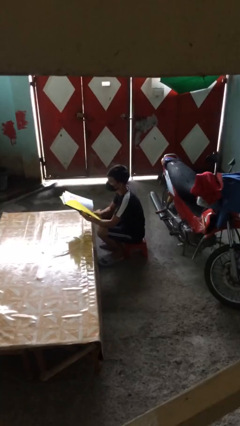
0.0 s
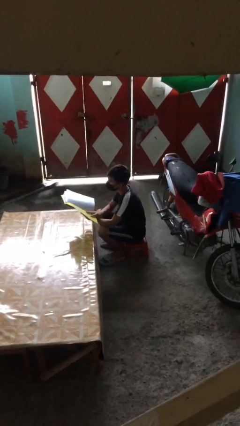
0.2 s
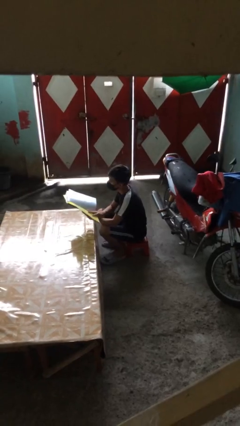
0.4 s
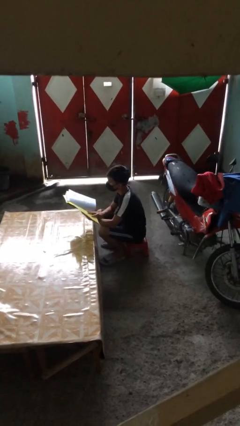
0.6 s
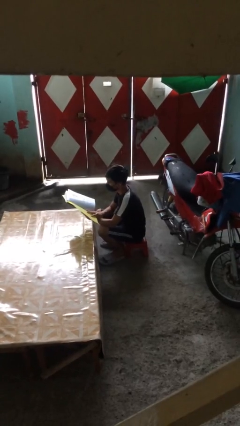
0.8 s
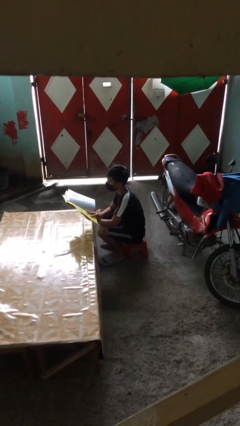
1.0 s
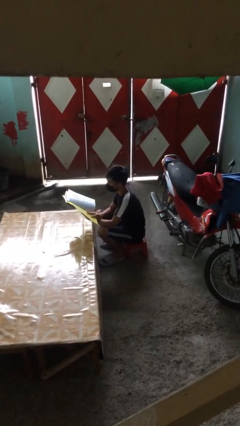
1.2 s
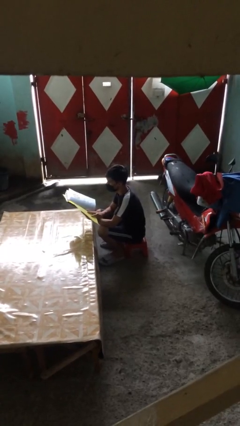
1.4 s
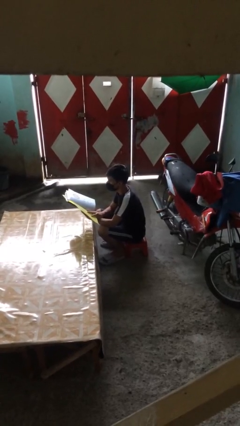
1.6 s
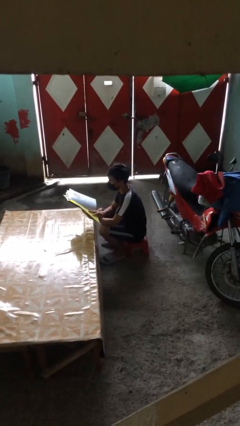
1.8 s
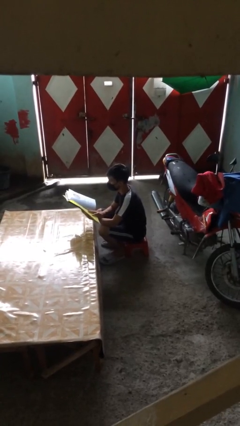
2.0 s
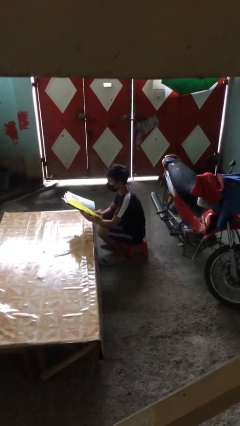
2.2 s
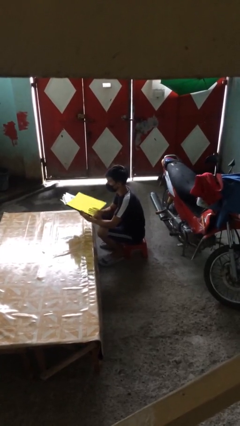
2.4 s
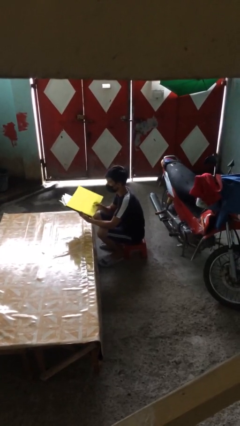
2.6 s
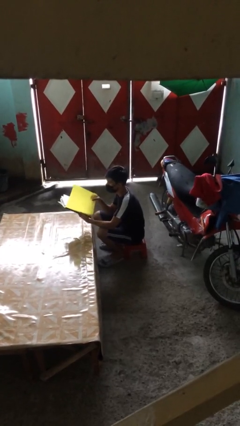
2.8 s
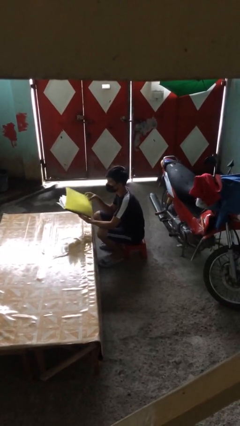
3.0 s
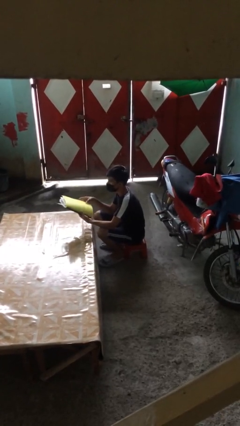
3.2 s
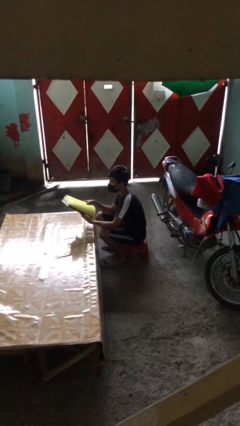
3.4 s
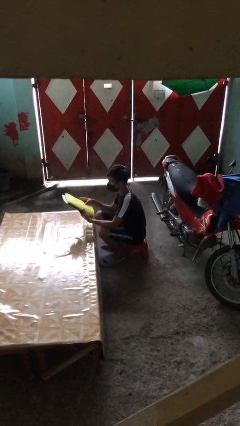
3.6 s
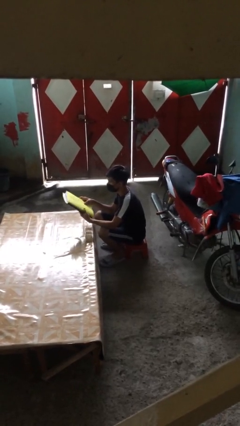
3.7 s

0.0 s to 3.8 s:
person reads document

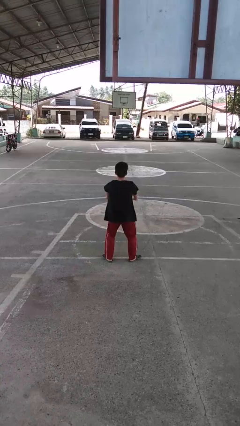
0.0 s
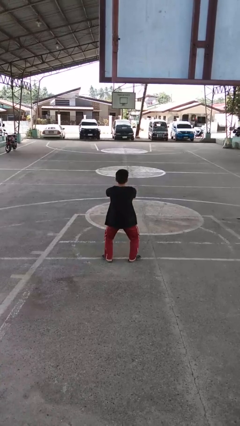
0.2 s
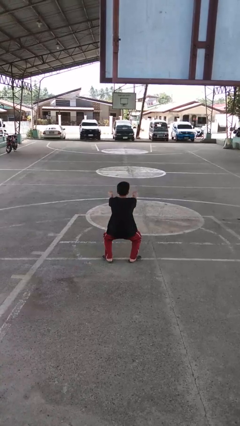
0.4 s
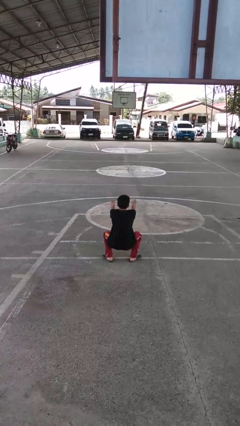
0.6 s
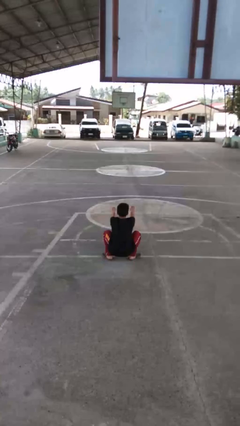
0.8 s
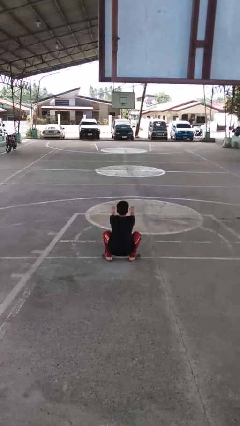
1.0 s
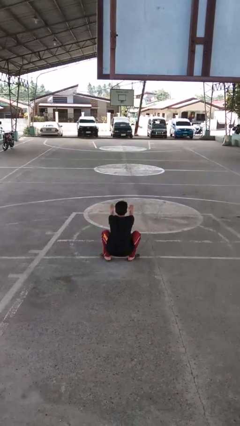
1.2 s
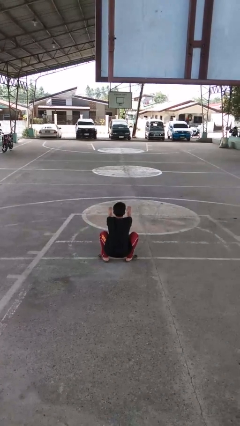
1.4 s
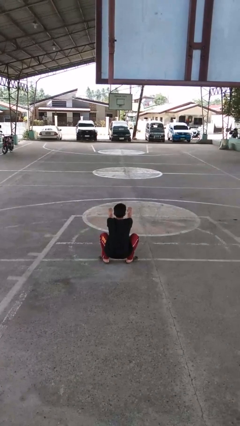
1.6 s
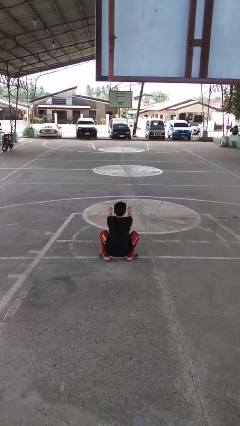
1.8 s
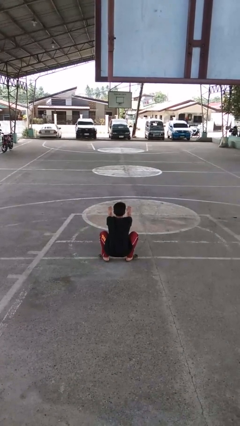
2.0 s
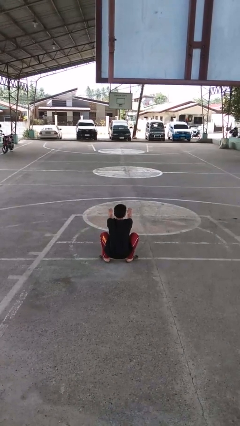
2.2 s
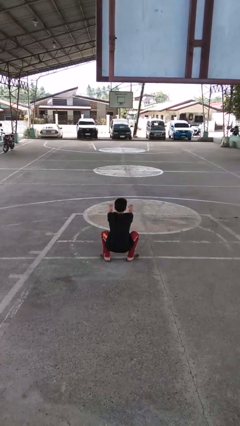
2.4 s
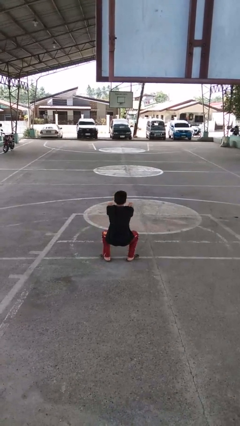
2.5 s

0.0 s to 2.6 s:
person squats

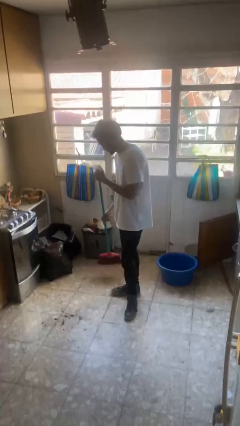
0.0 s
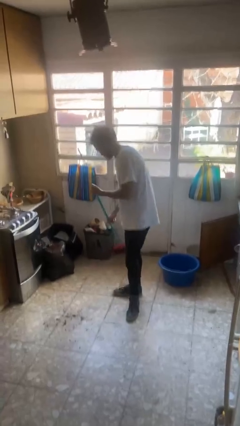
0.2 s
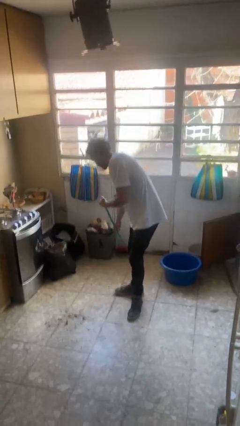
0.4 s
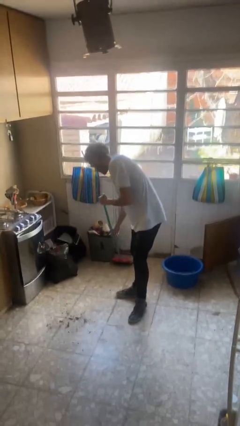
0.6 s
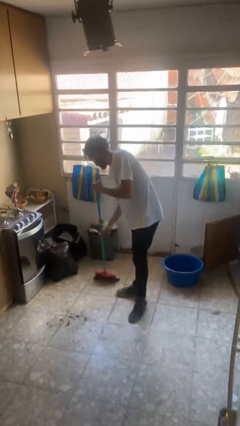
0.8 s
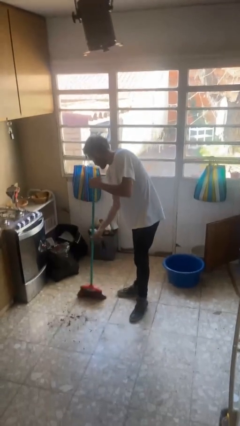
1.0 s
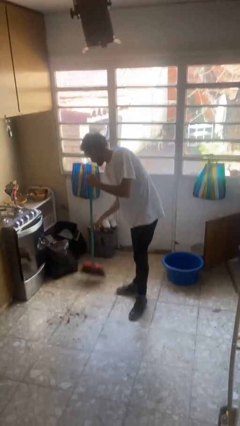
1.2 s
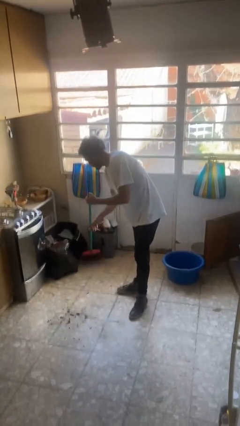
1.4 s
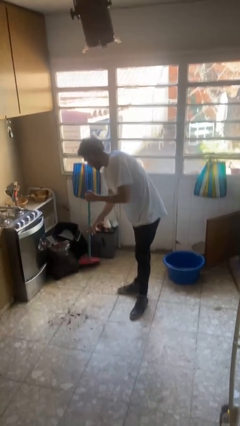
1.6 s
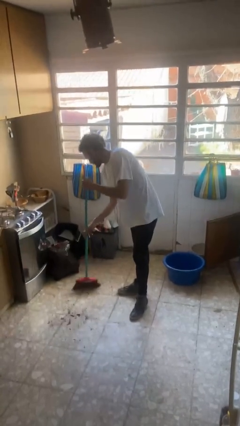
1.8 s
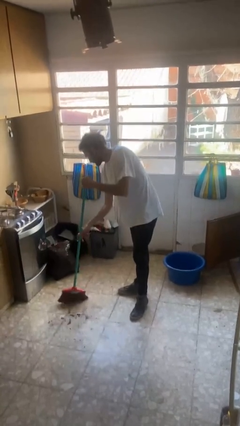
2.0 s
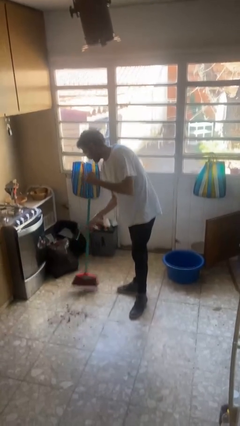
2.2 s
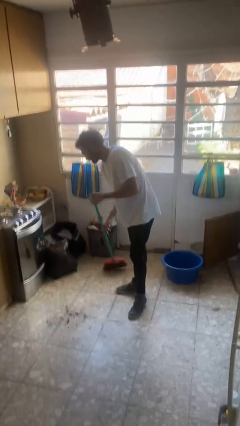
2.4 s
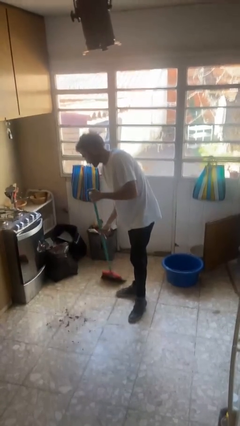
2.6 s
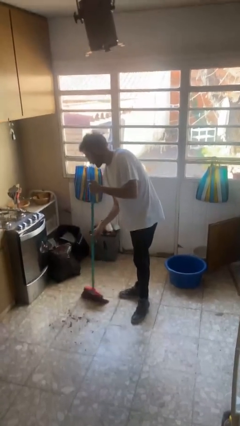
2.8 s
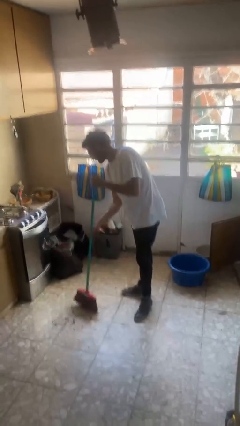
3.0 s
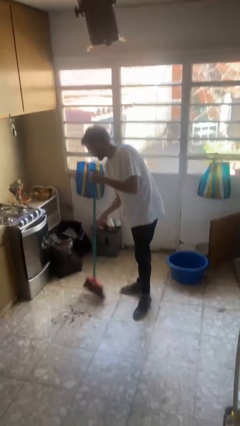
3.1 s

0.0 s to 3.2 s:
person sweeps floor

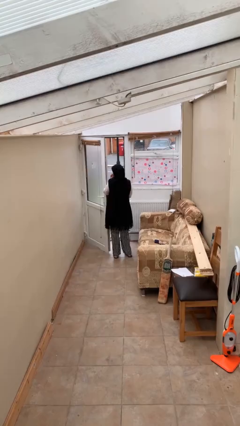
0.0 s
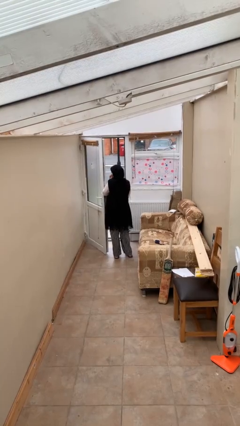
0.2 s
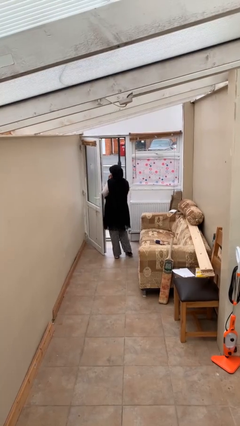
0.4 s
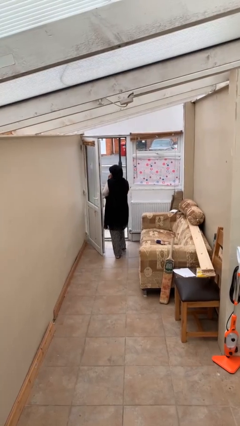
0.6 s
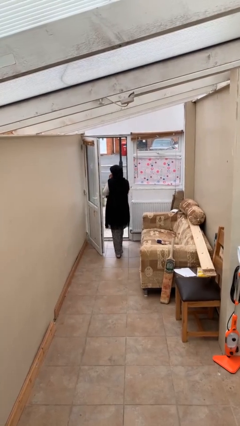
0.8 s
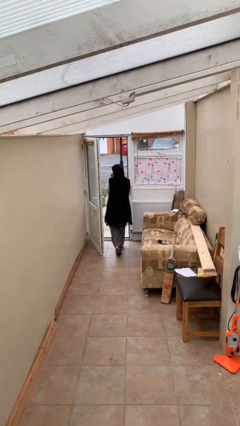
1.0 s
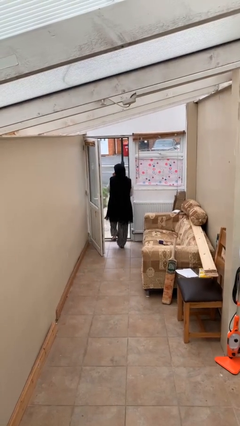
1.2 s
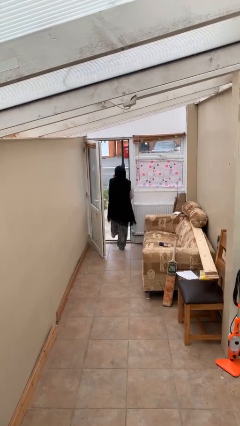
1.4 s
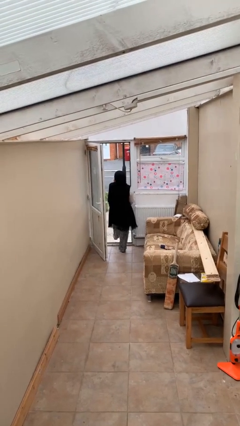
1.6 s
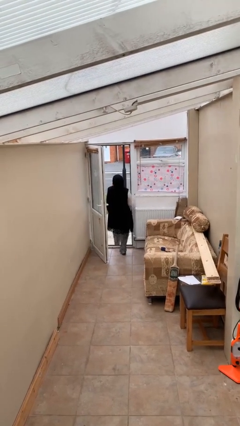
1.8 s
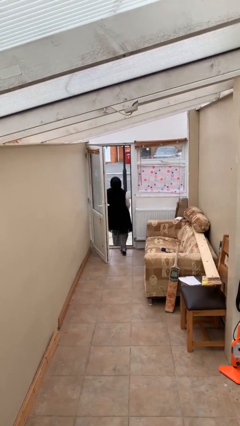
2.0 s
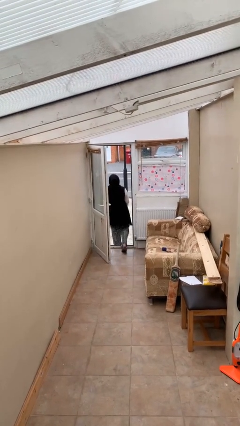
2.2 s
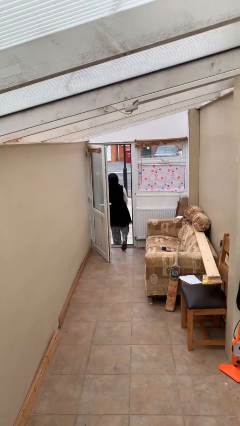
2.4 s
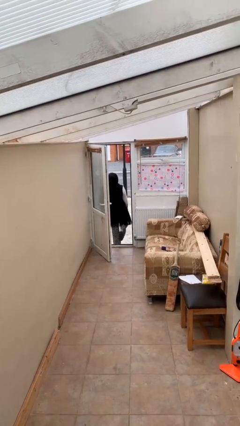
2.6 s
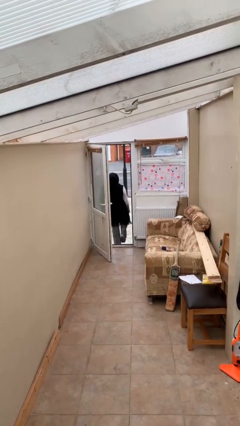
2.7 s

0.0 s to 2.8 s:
person exits scene through structure

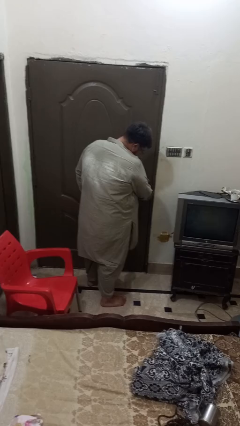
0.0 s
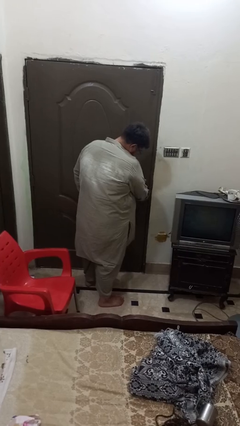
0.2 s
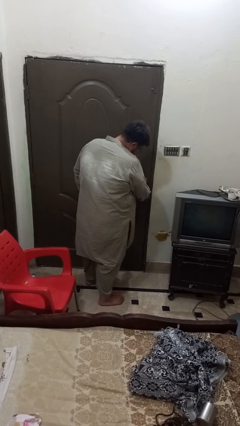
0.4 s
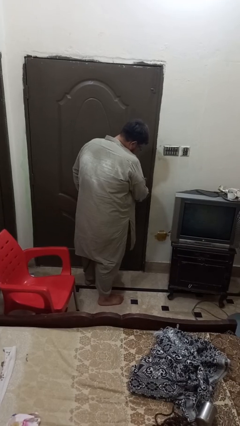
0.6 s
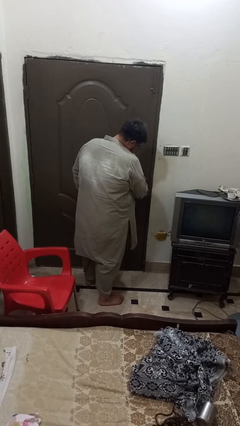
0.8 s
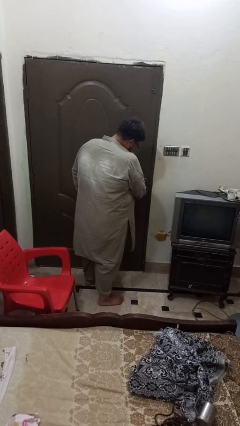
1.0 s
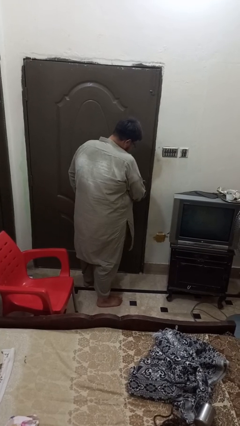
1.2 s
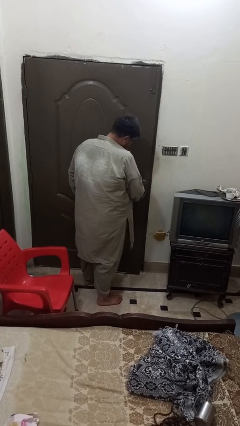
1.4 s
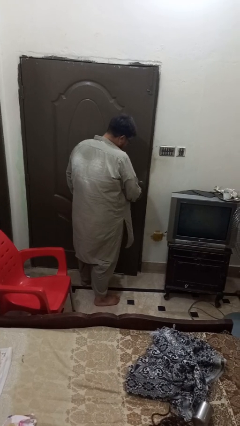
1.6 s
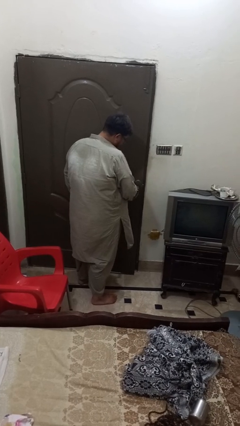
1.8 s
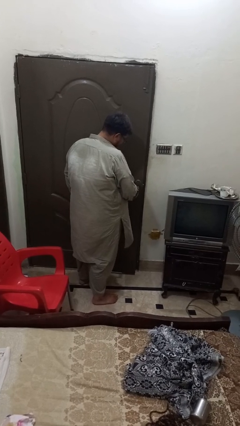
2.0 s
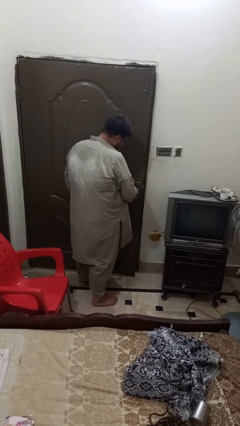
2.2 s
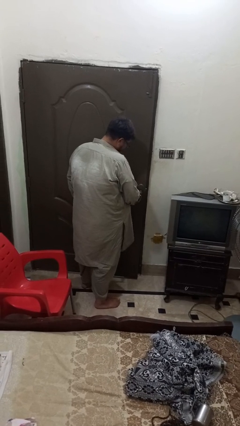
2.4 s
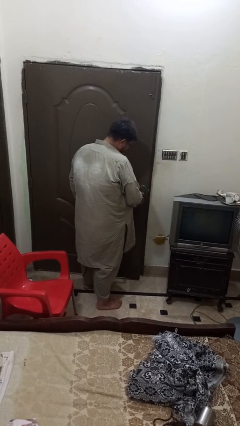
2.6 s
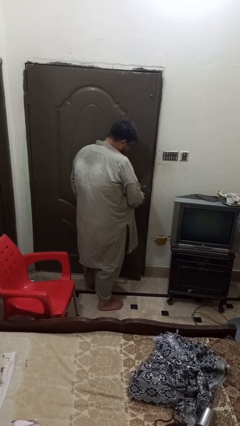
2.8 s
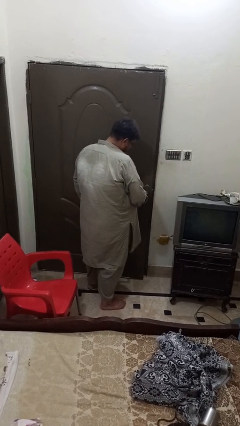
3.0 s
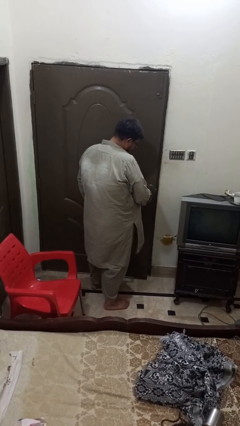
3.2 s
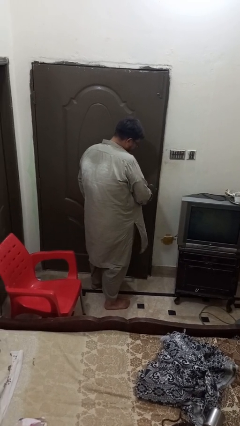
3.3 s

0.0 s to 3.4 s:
person opens facility door

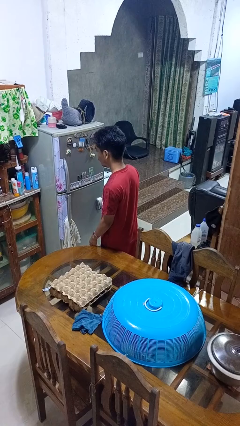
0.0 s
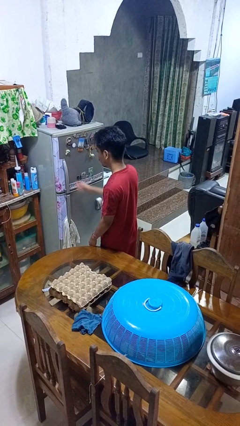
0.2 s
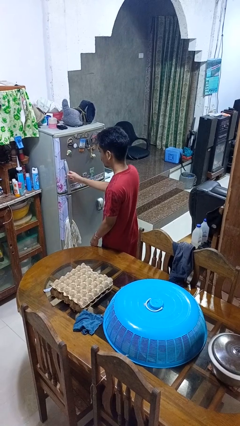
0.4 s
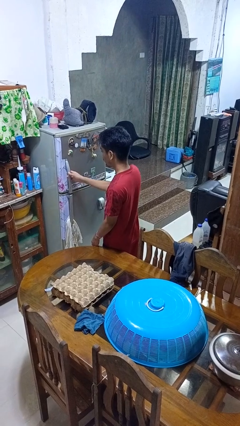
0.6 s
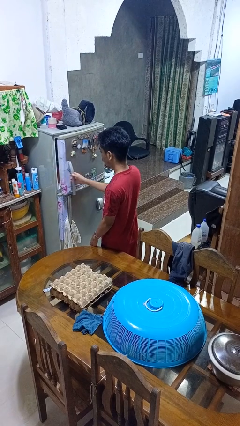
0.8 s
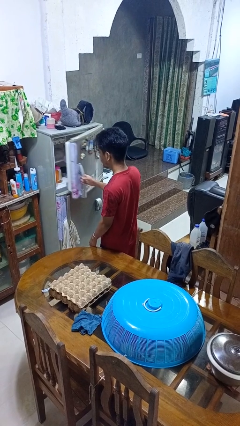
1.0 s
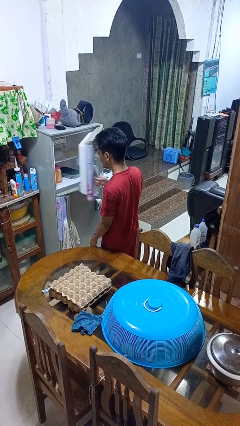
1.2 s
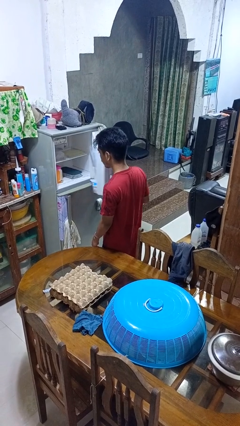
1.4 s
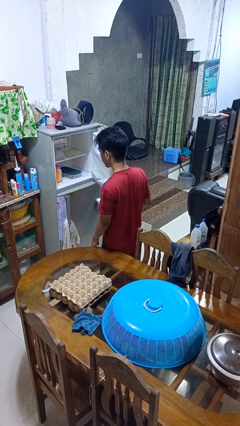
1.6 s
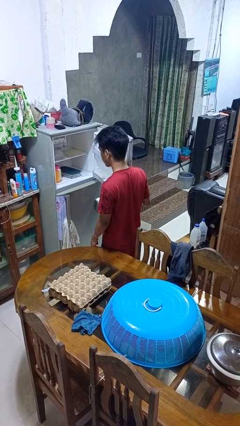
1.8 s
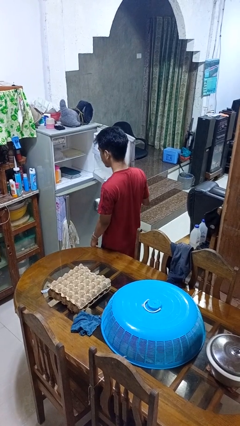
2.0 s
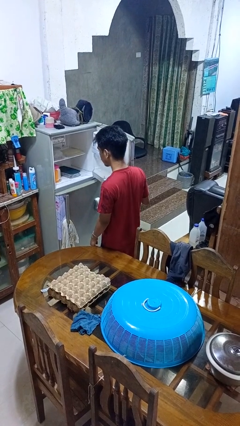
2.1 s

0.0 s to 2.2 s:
person opens refrigerator
